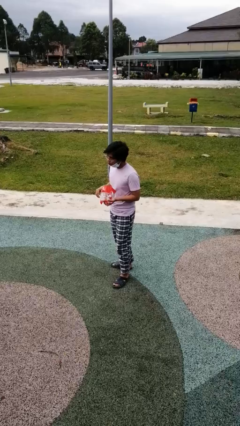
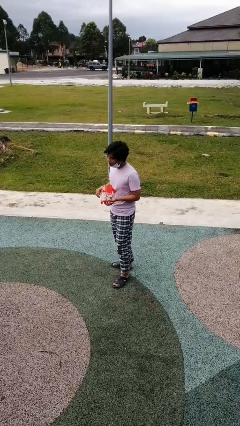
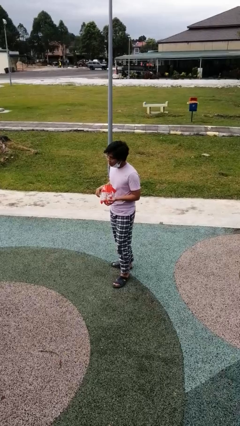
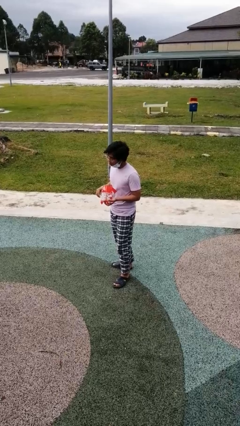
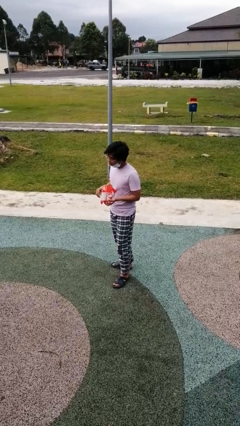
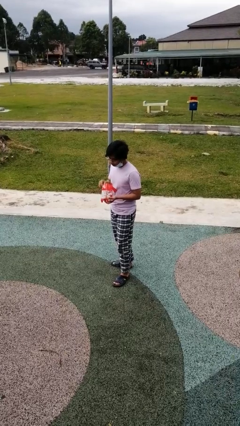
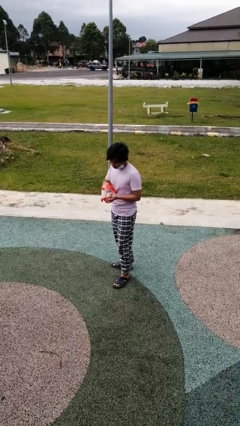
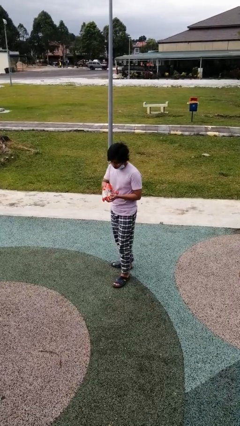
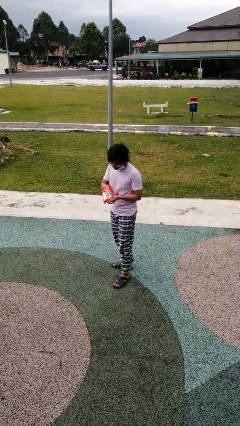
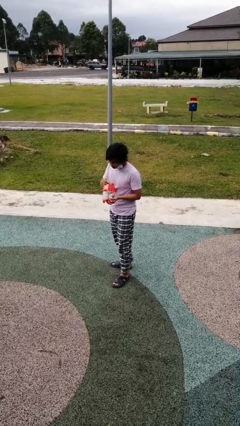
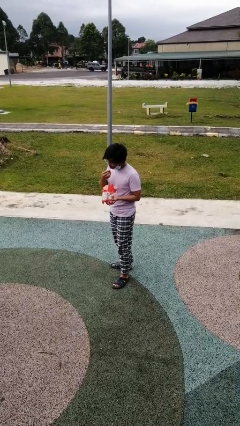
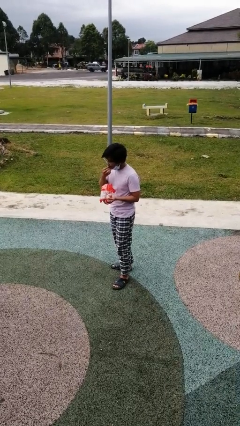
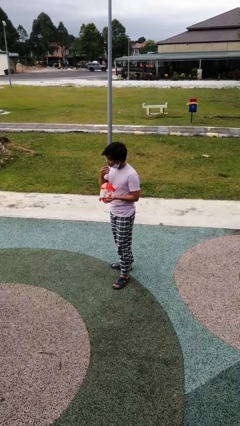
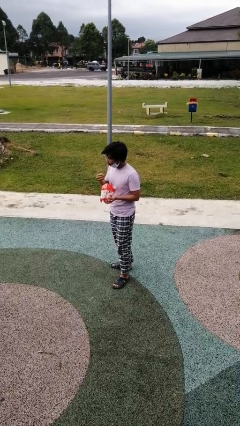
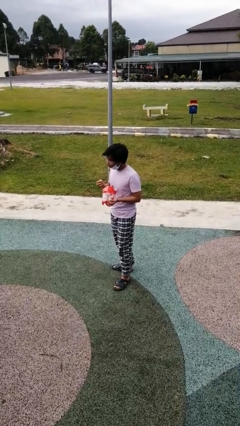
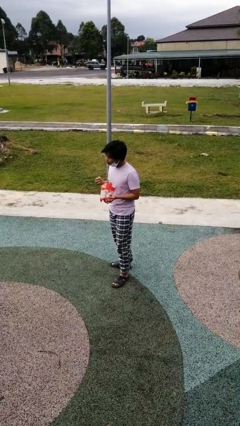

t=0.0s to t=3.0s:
person eats snack from bag

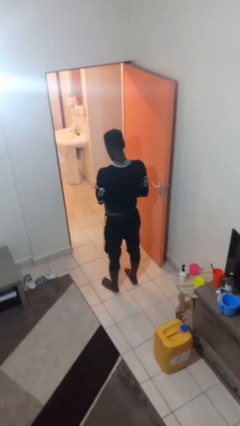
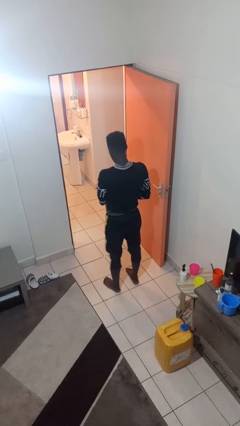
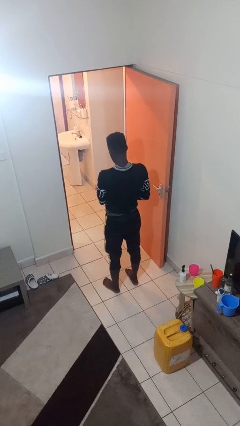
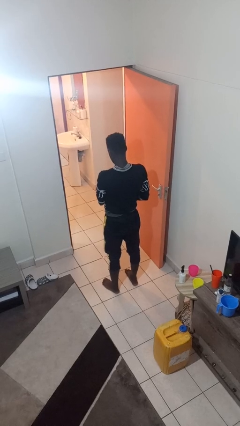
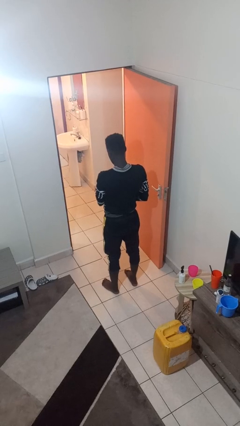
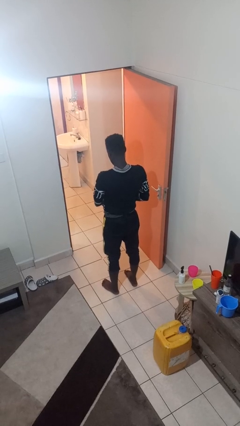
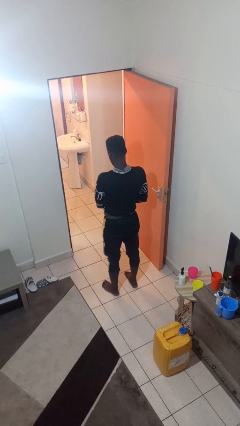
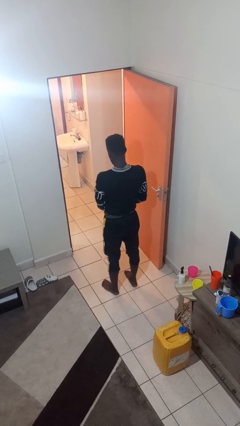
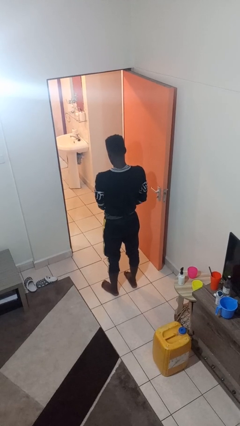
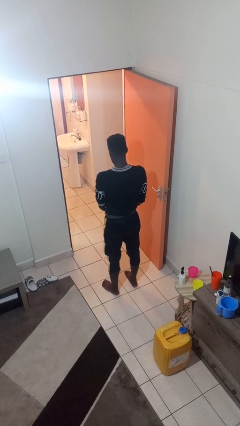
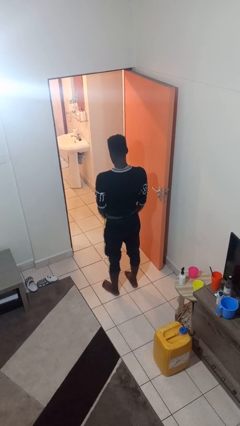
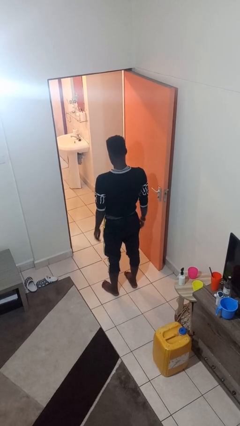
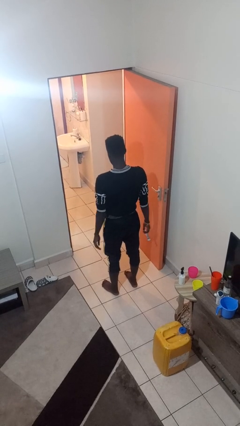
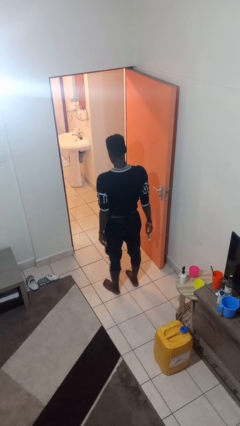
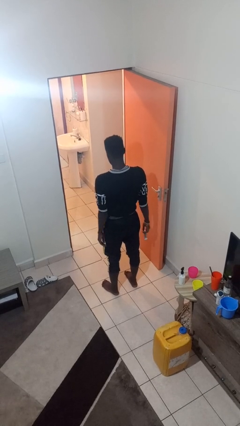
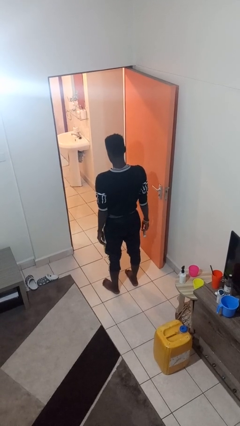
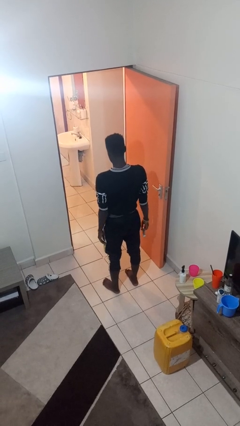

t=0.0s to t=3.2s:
person takes off wristwatch

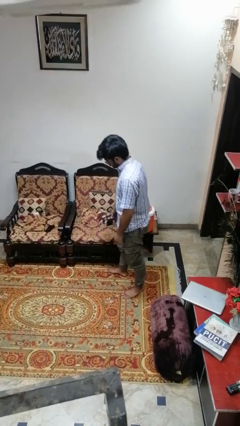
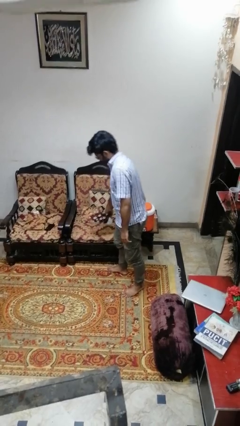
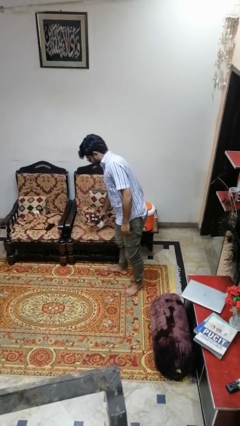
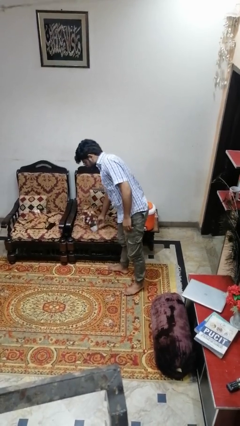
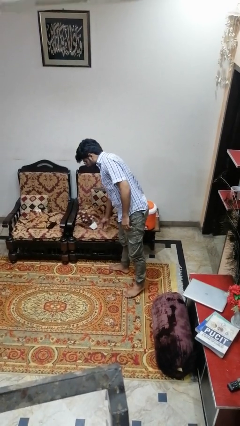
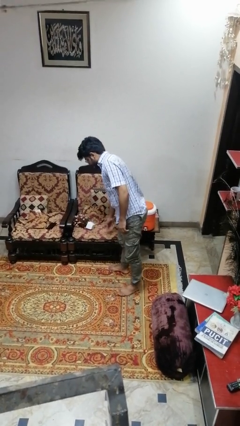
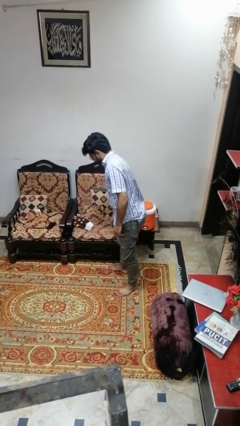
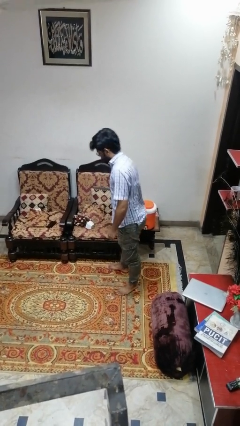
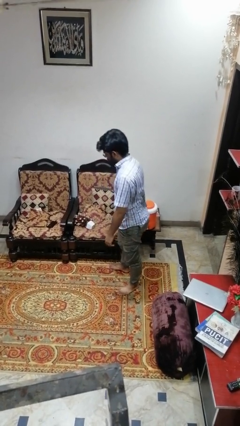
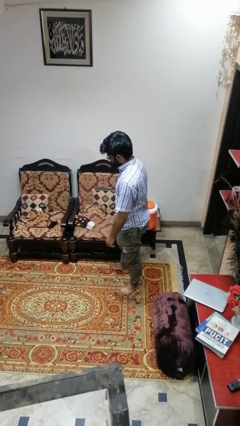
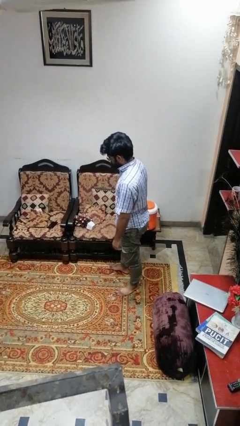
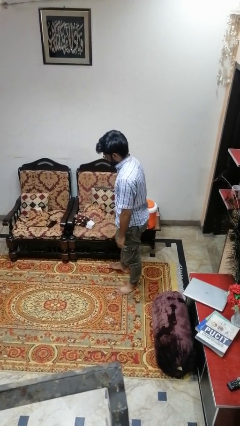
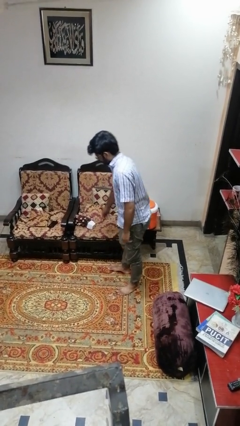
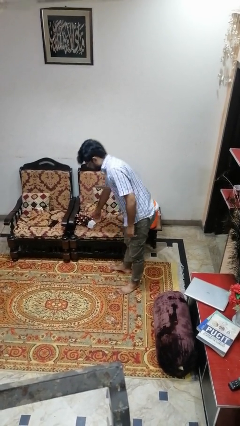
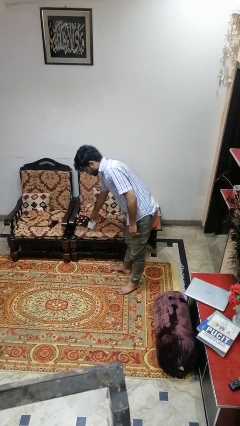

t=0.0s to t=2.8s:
person puts down object on couch

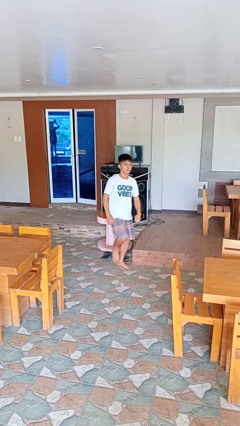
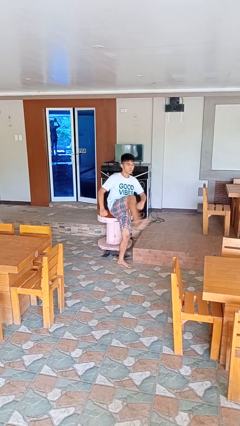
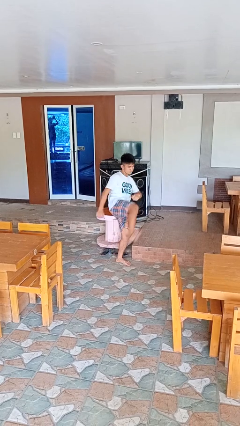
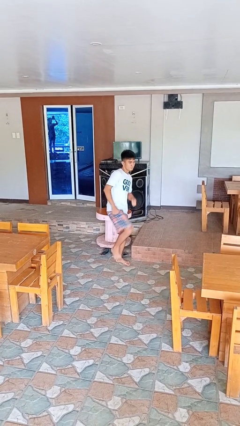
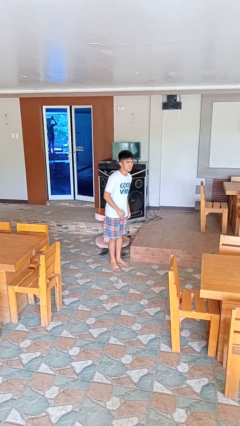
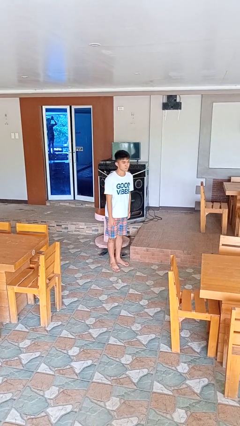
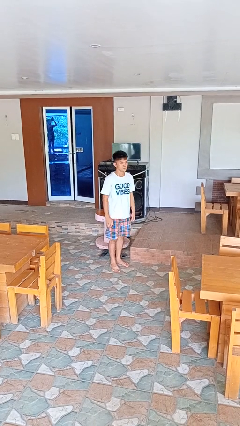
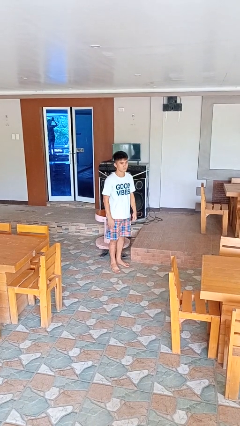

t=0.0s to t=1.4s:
person karate kicks

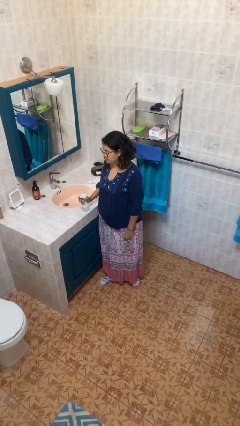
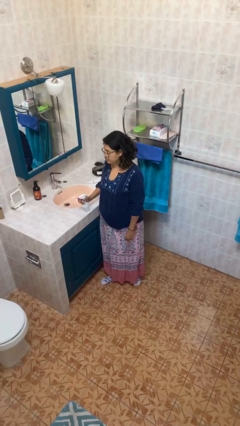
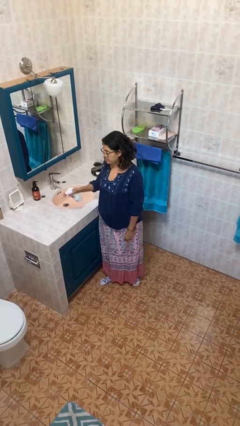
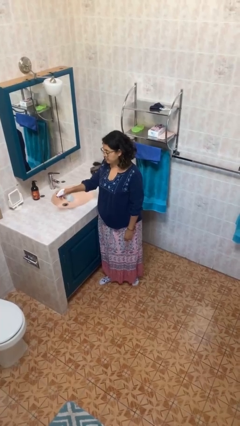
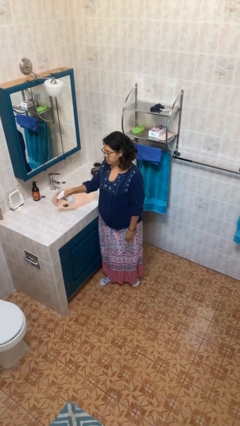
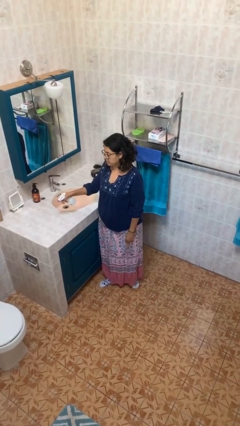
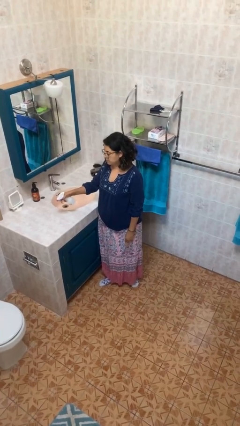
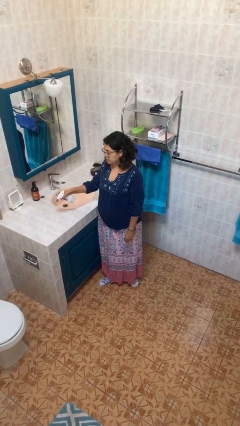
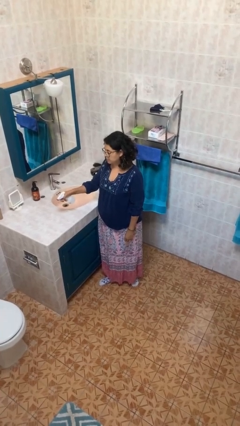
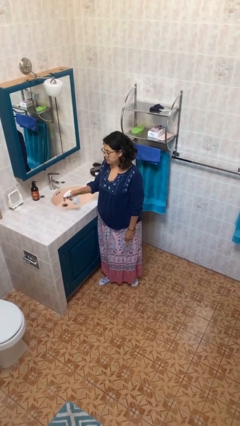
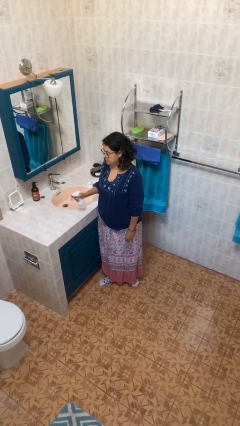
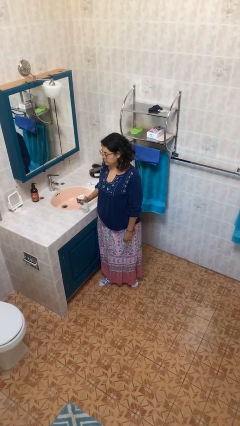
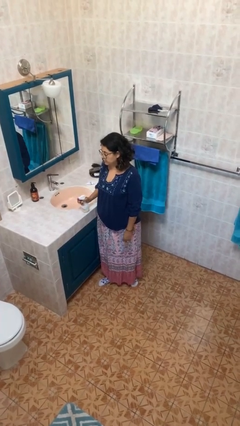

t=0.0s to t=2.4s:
person sprays from bottle

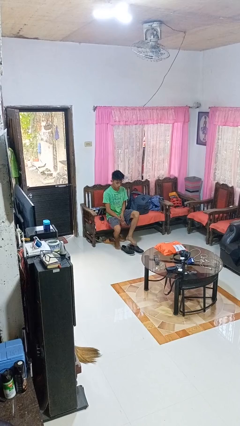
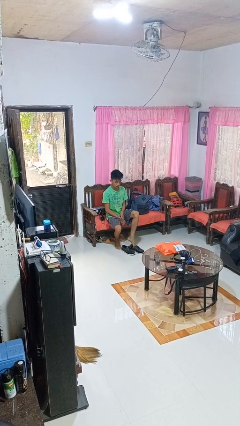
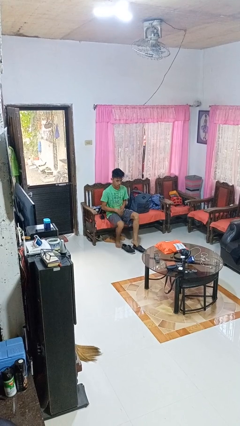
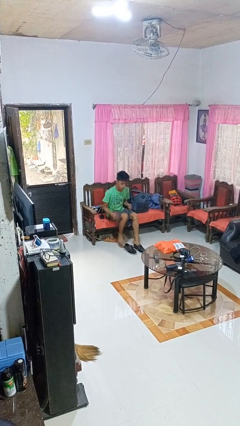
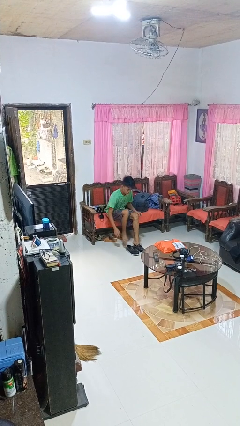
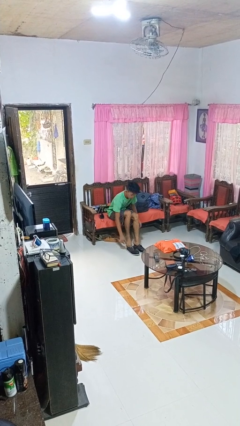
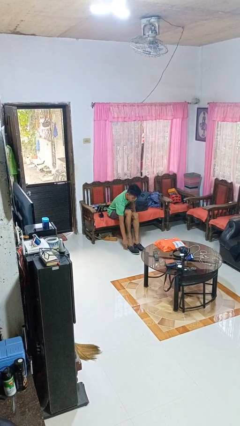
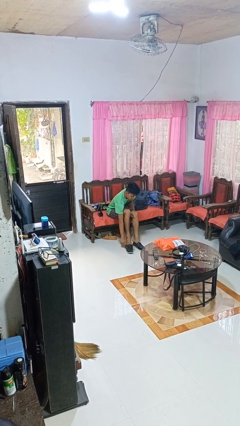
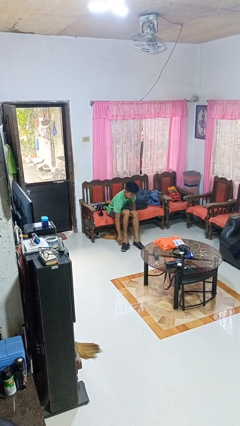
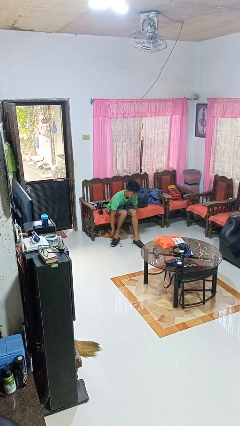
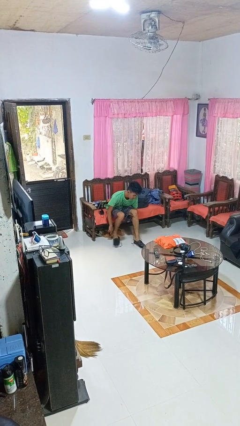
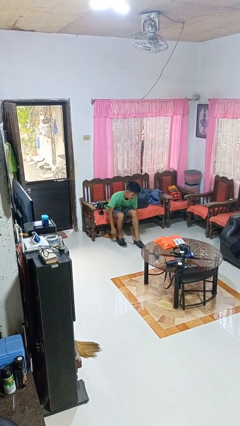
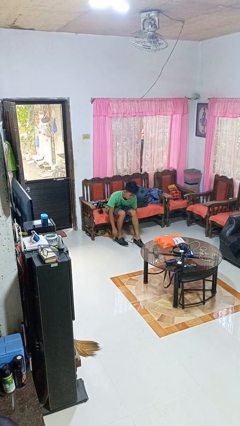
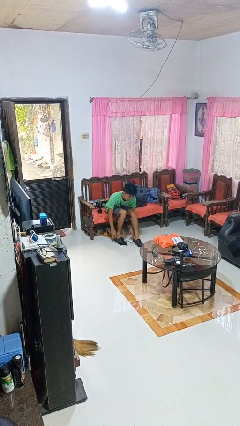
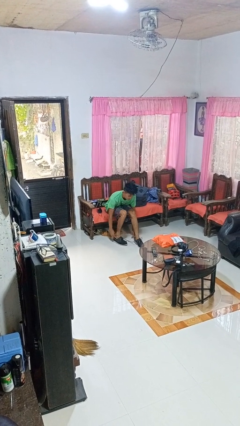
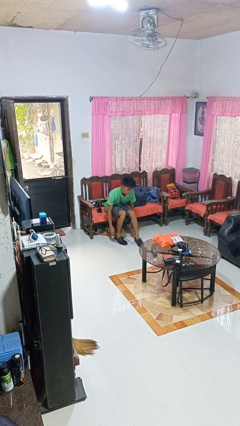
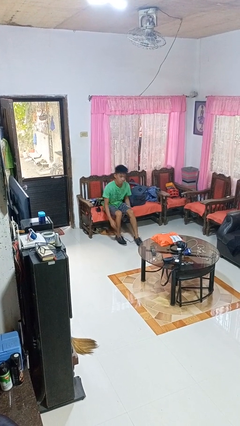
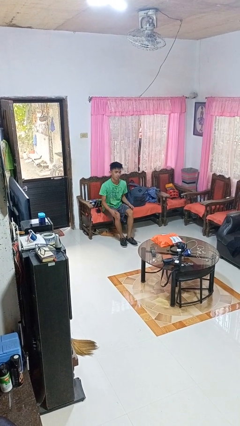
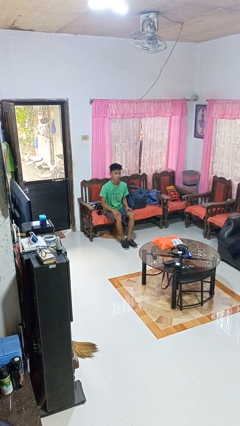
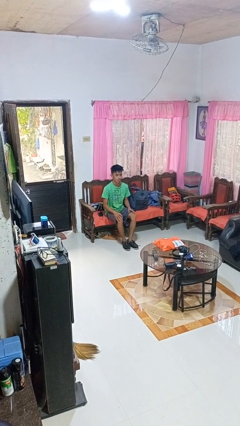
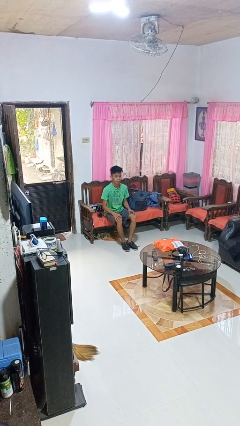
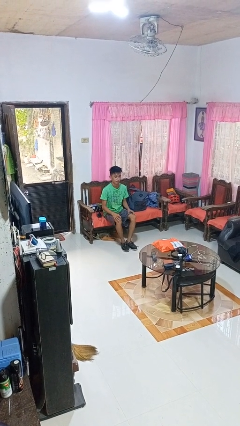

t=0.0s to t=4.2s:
person puts on shoes

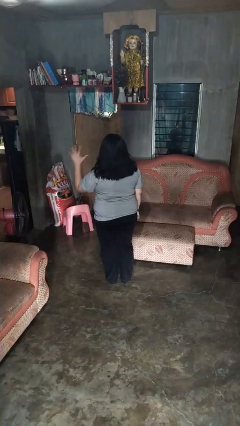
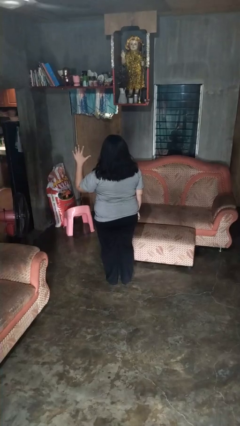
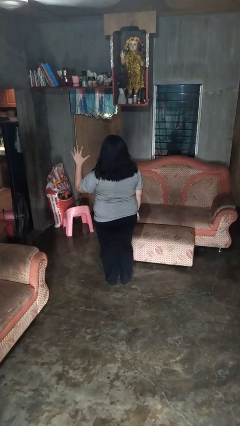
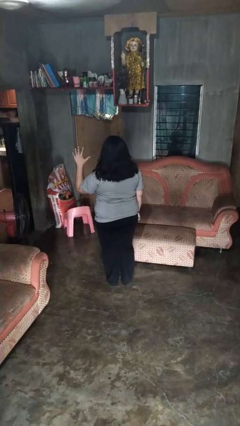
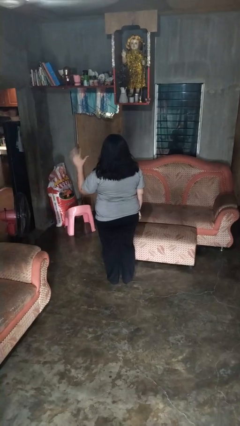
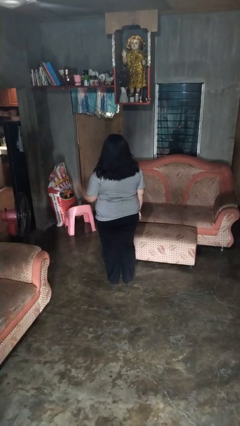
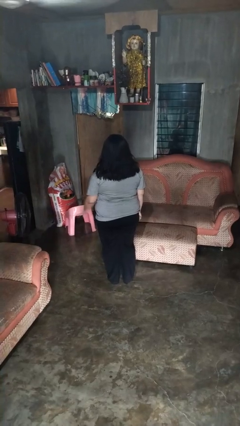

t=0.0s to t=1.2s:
person gestures number five
